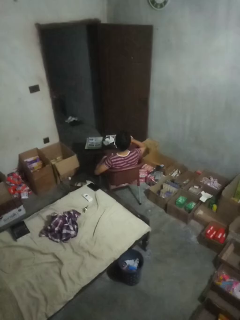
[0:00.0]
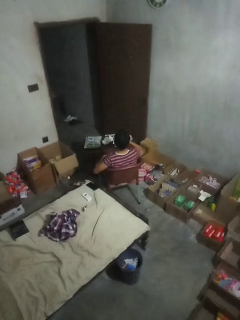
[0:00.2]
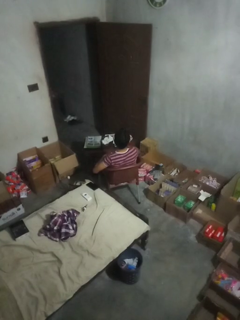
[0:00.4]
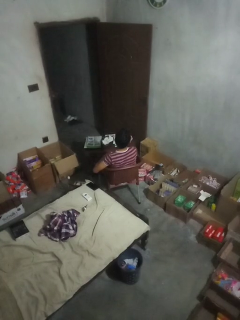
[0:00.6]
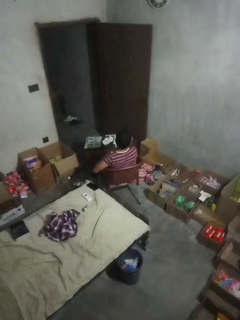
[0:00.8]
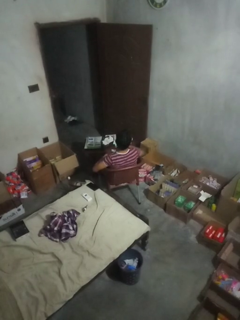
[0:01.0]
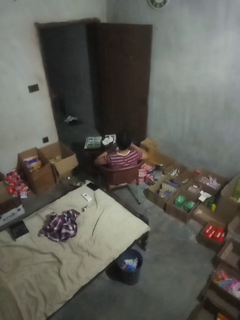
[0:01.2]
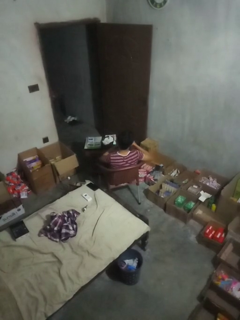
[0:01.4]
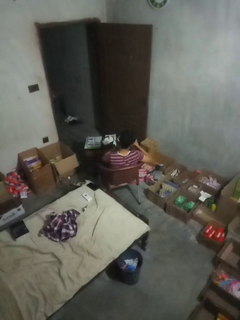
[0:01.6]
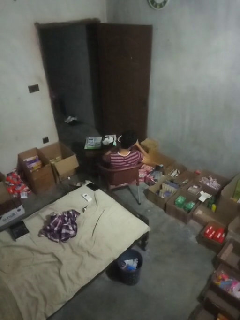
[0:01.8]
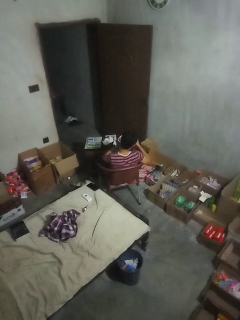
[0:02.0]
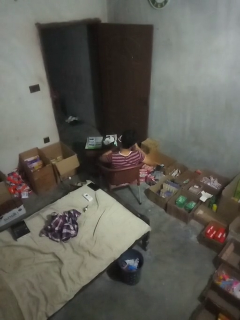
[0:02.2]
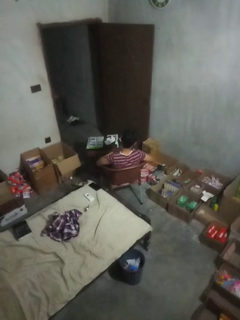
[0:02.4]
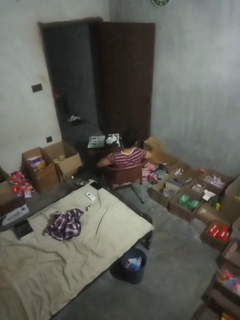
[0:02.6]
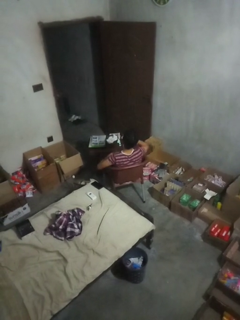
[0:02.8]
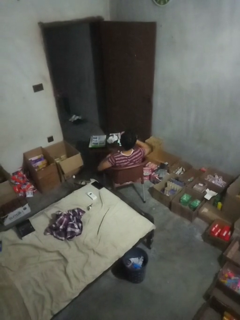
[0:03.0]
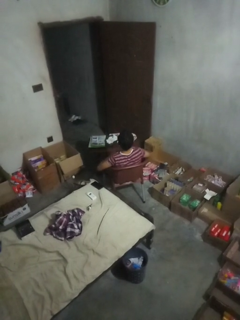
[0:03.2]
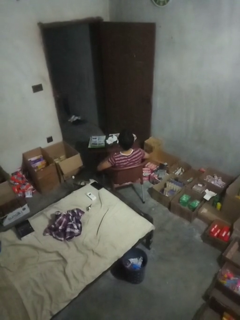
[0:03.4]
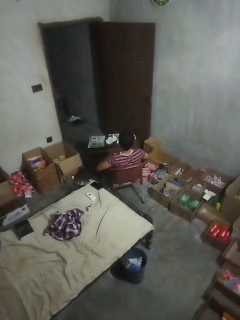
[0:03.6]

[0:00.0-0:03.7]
person takes medicine pills

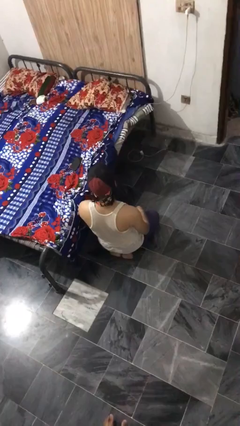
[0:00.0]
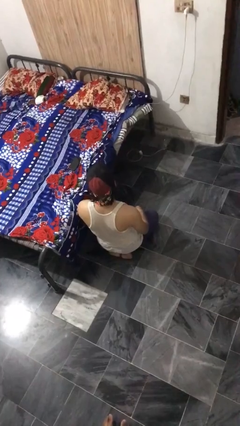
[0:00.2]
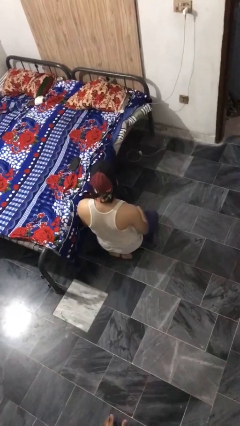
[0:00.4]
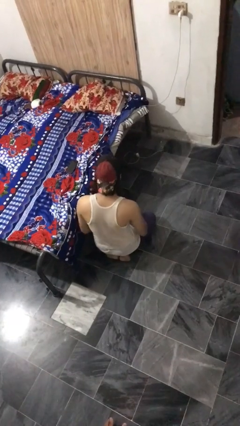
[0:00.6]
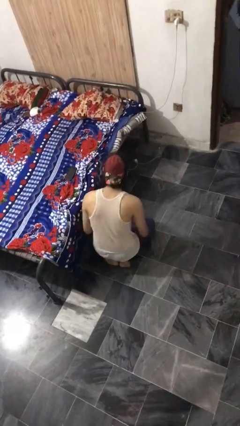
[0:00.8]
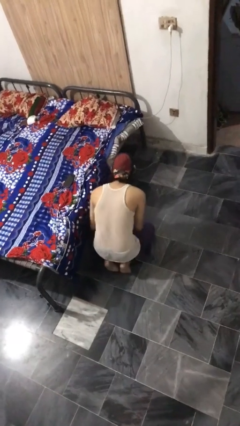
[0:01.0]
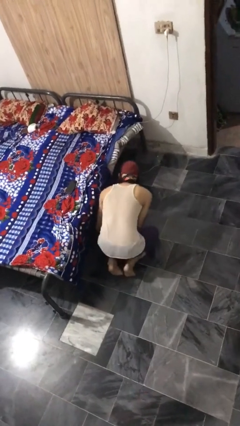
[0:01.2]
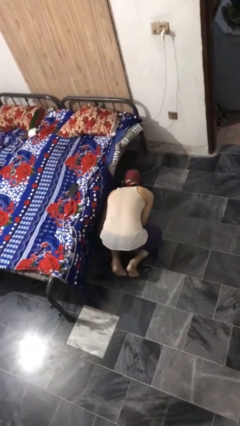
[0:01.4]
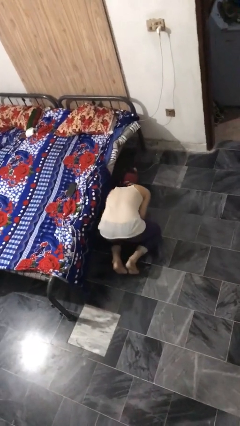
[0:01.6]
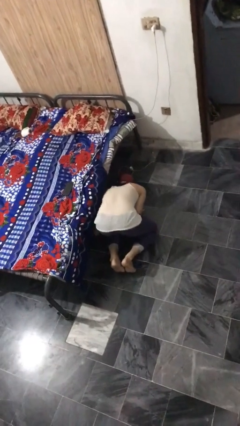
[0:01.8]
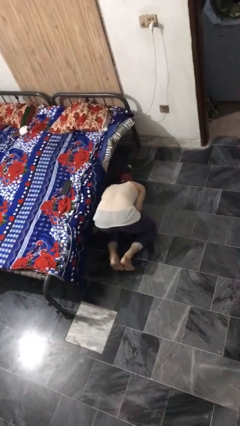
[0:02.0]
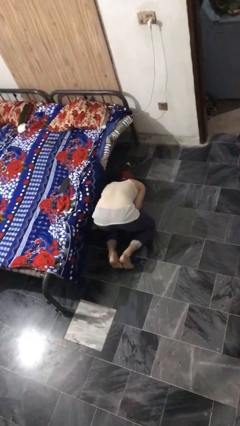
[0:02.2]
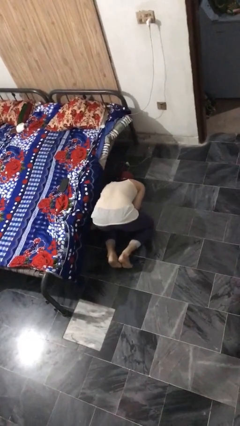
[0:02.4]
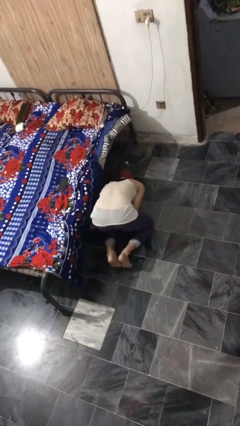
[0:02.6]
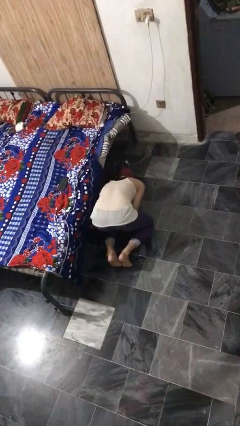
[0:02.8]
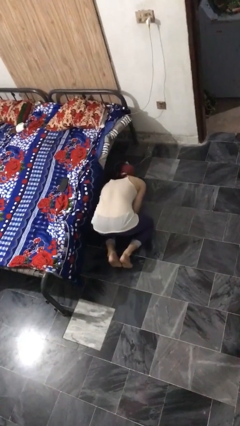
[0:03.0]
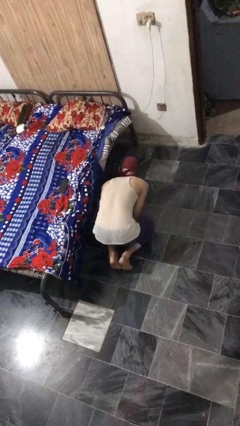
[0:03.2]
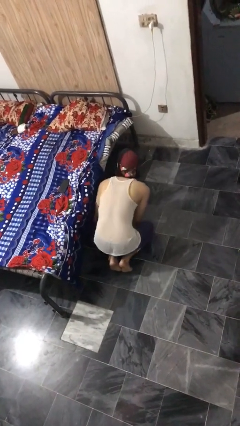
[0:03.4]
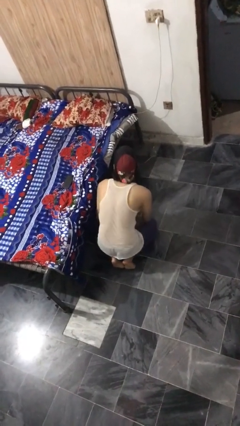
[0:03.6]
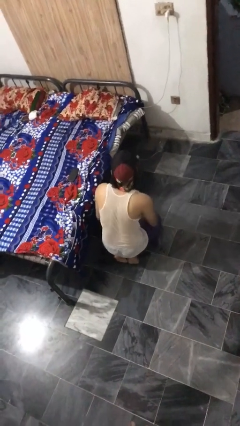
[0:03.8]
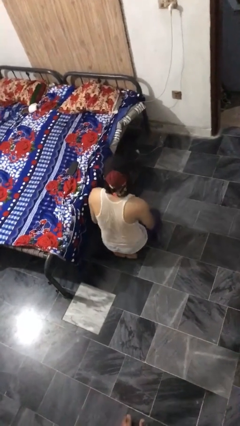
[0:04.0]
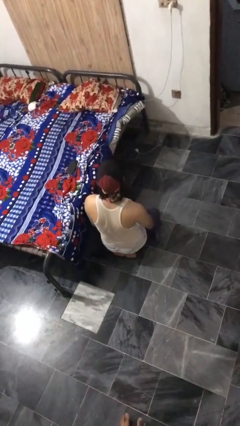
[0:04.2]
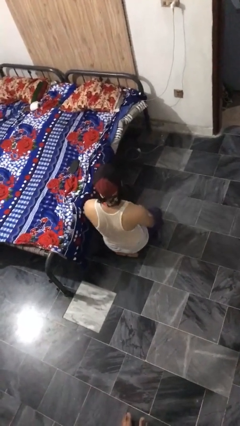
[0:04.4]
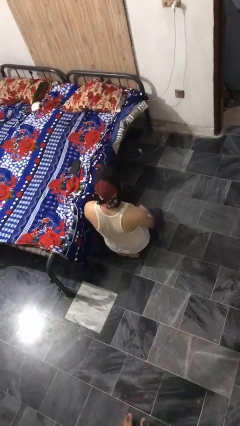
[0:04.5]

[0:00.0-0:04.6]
person searches under bed

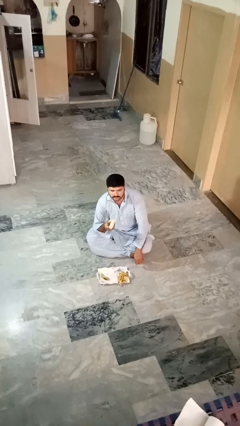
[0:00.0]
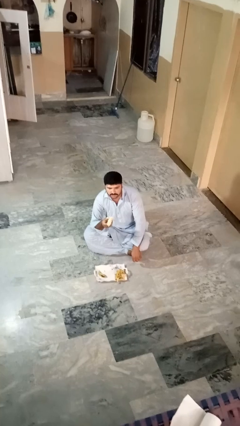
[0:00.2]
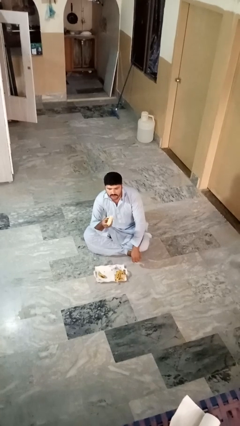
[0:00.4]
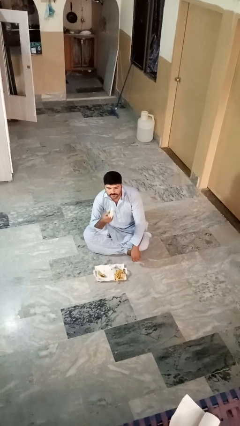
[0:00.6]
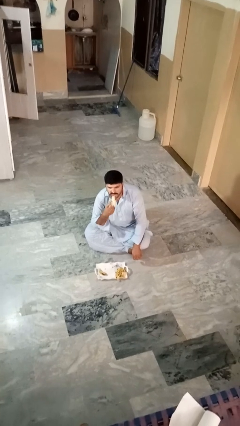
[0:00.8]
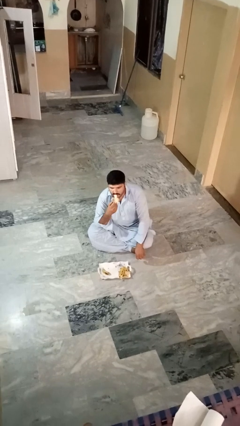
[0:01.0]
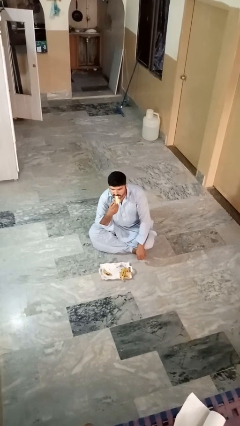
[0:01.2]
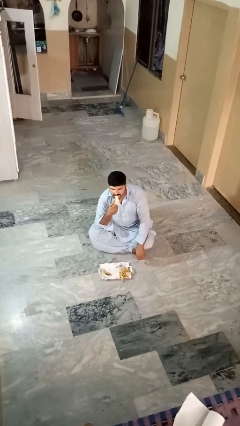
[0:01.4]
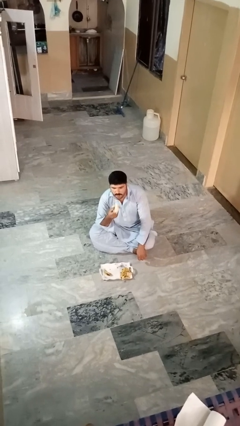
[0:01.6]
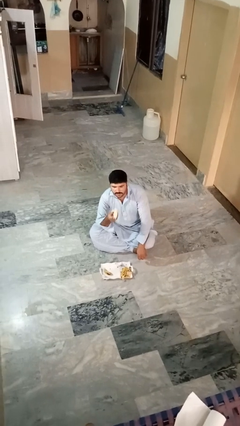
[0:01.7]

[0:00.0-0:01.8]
person eats banana

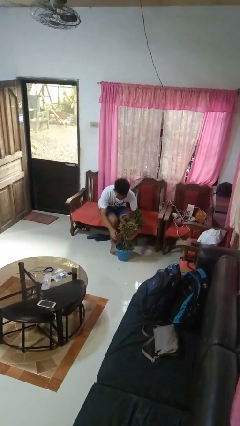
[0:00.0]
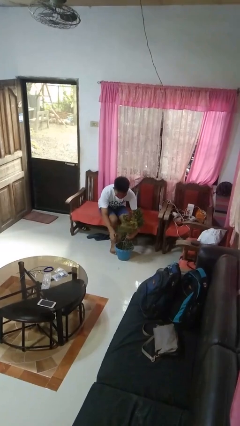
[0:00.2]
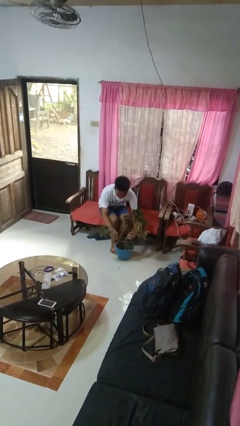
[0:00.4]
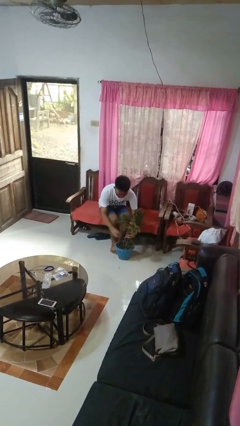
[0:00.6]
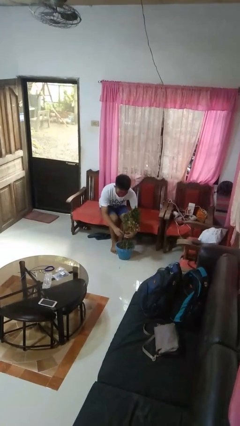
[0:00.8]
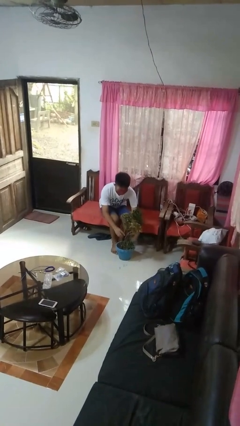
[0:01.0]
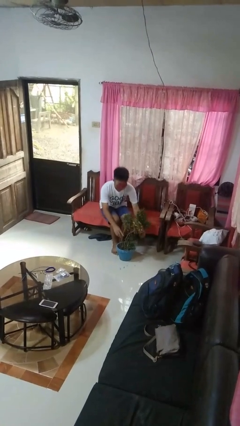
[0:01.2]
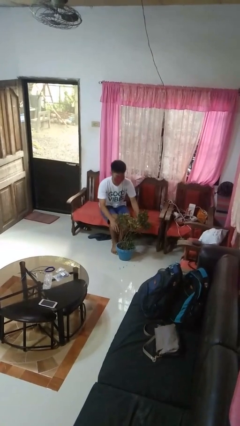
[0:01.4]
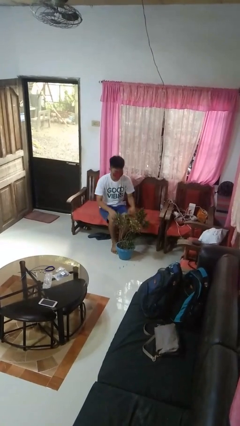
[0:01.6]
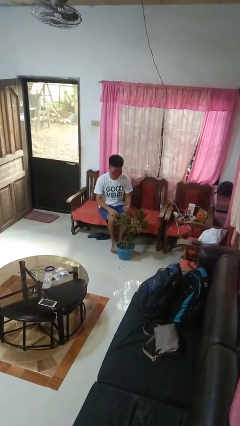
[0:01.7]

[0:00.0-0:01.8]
person arranges flowers in vase

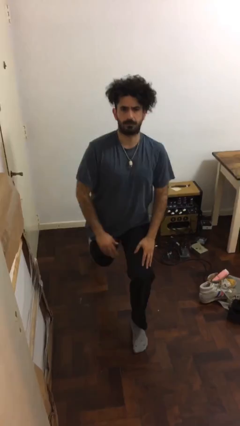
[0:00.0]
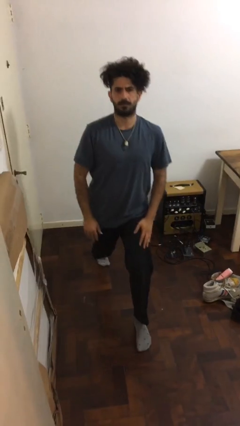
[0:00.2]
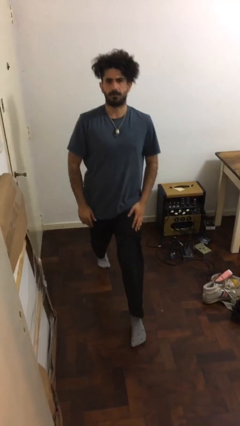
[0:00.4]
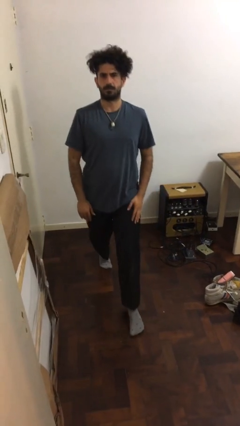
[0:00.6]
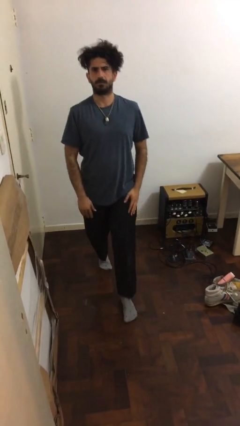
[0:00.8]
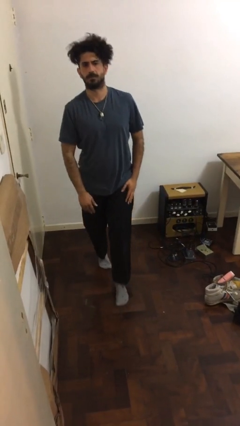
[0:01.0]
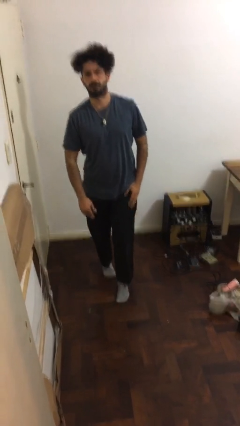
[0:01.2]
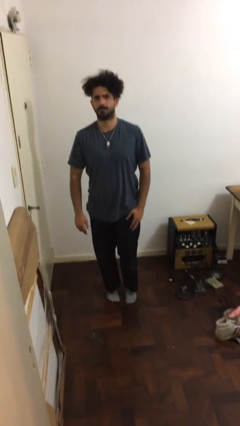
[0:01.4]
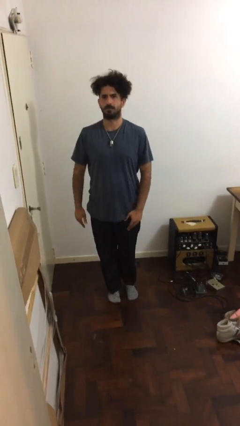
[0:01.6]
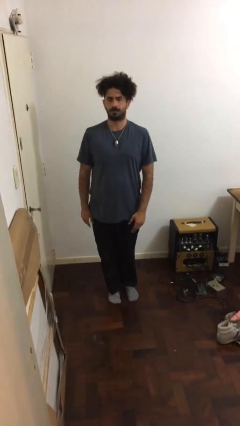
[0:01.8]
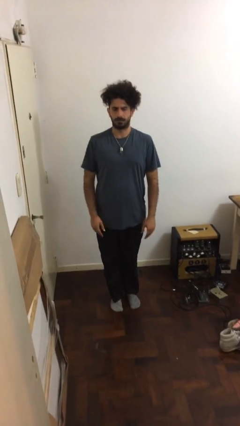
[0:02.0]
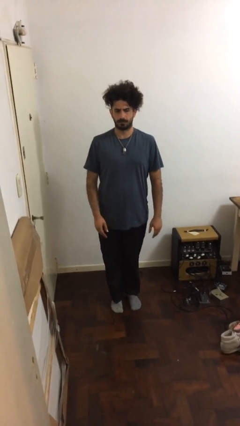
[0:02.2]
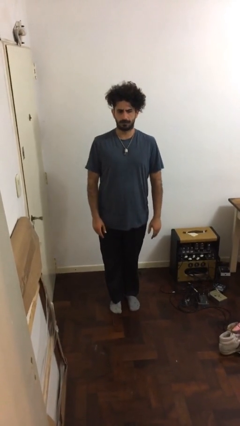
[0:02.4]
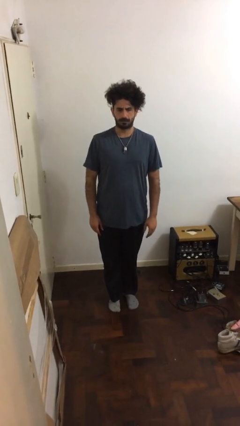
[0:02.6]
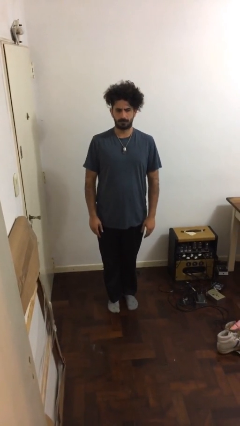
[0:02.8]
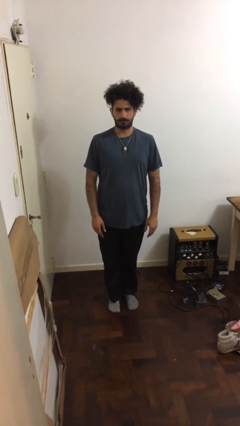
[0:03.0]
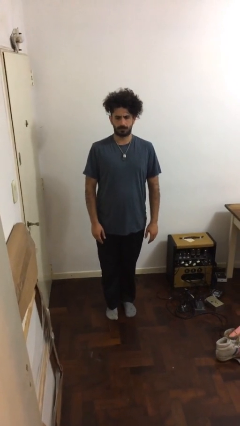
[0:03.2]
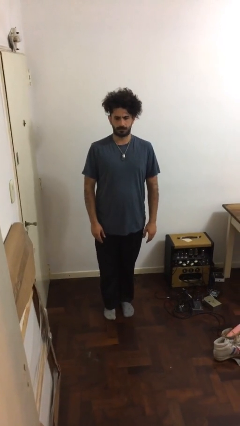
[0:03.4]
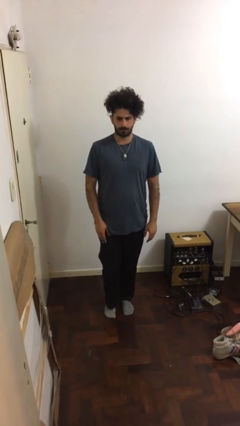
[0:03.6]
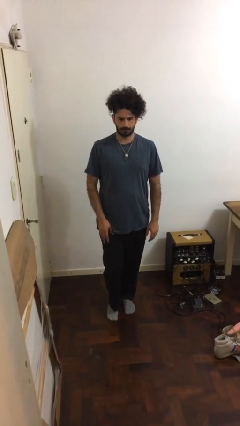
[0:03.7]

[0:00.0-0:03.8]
person stands up from floor

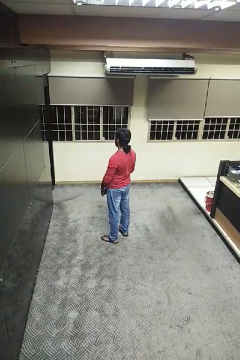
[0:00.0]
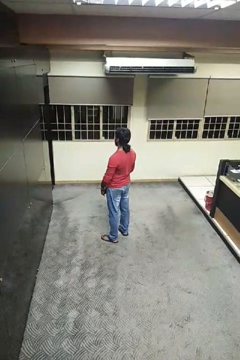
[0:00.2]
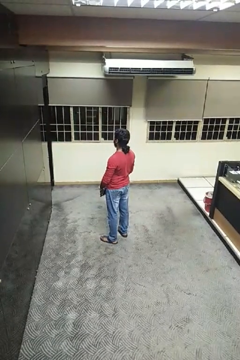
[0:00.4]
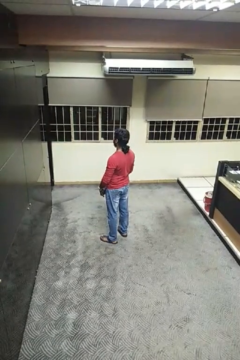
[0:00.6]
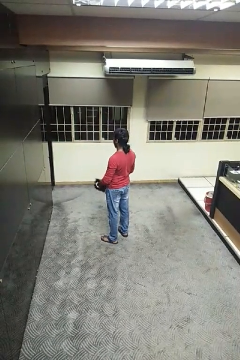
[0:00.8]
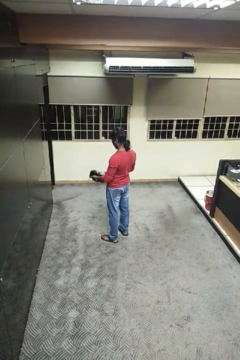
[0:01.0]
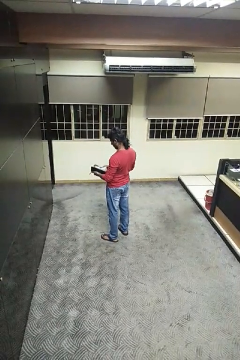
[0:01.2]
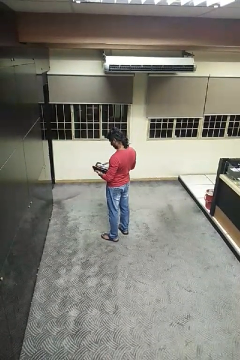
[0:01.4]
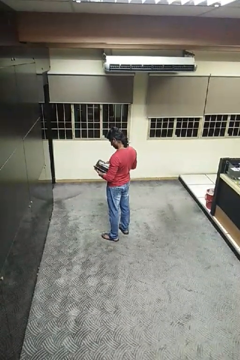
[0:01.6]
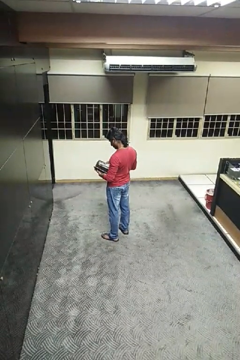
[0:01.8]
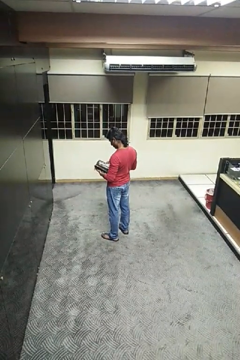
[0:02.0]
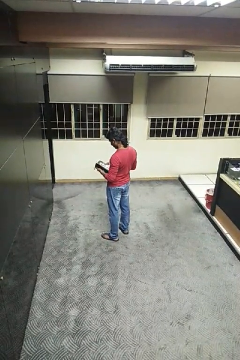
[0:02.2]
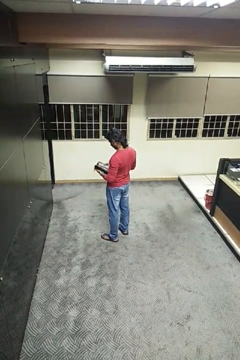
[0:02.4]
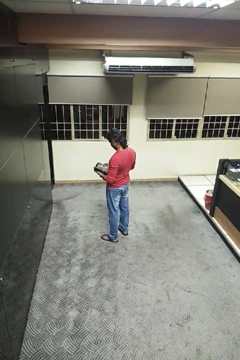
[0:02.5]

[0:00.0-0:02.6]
person searches in purse

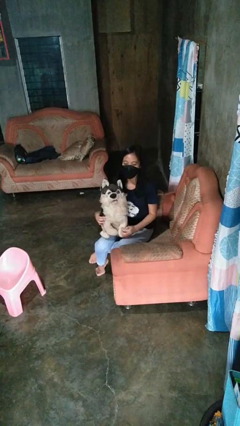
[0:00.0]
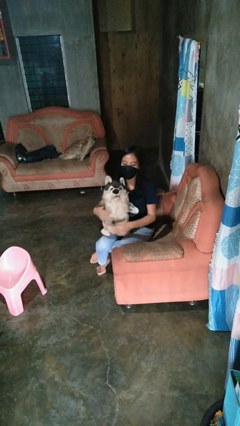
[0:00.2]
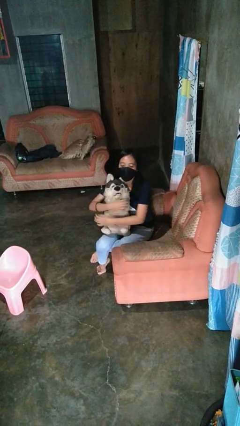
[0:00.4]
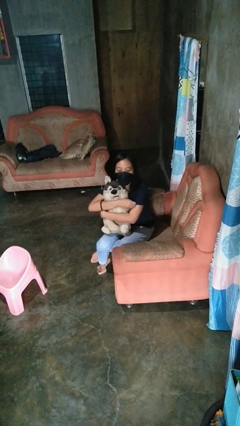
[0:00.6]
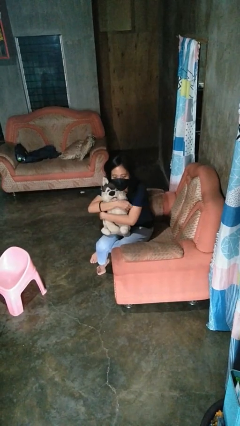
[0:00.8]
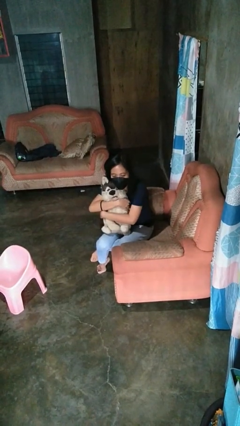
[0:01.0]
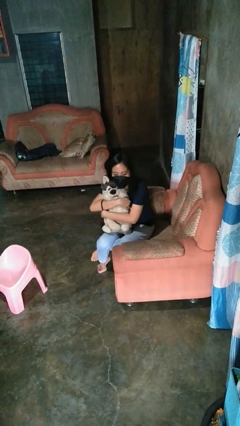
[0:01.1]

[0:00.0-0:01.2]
person hugs stuffed animal
